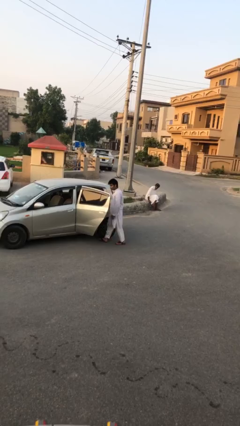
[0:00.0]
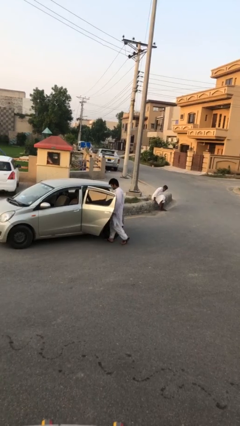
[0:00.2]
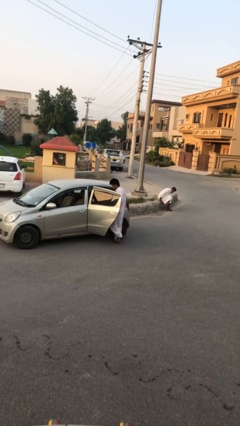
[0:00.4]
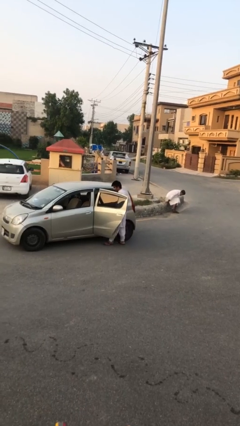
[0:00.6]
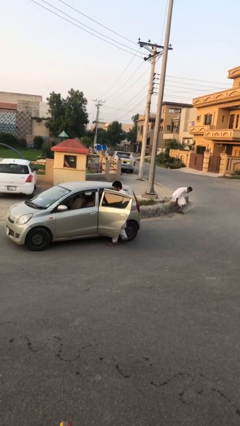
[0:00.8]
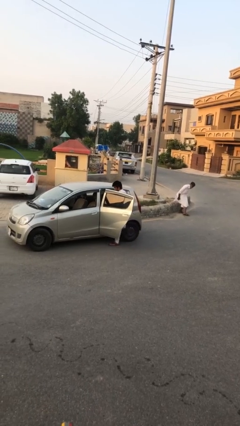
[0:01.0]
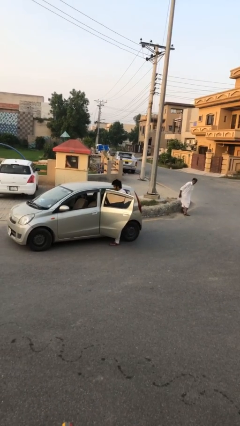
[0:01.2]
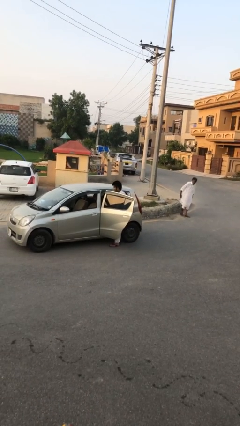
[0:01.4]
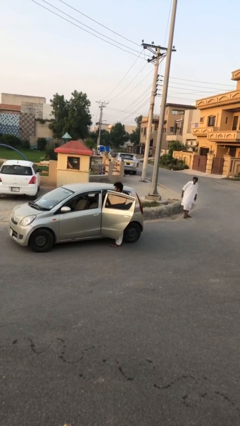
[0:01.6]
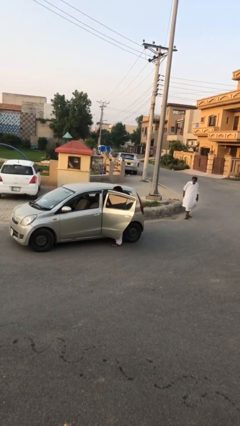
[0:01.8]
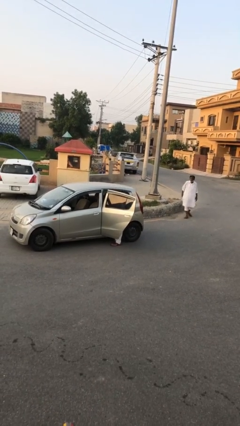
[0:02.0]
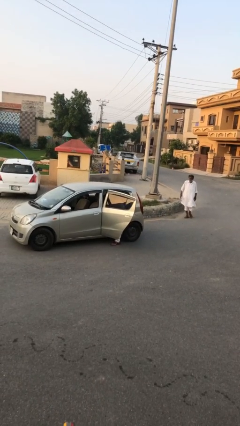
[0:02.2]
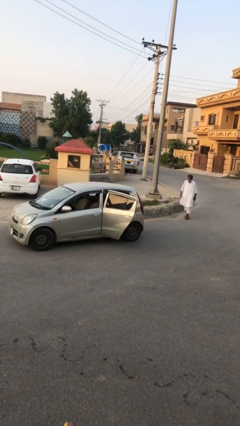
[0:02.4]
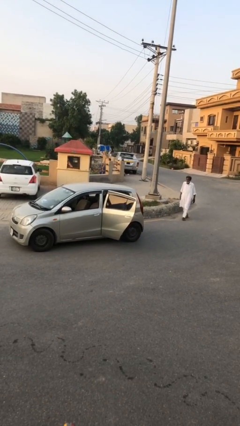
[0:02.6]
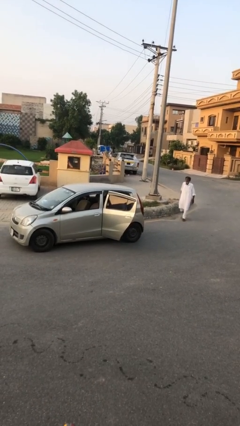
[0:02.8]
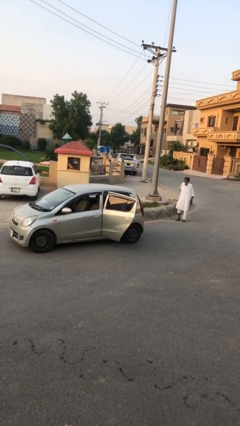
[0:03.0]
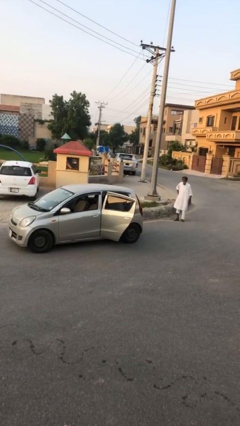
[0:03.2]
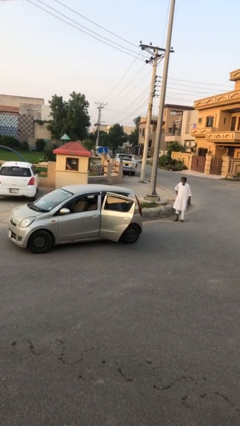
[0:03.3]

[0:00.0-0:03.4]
person enters car

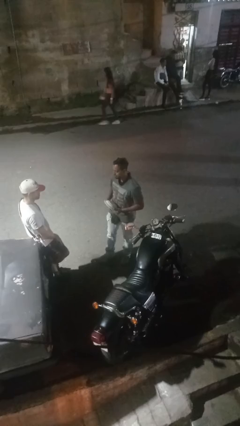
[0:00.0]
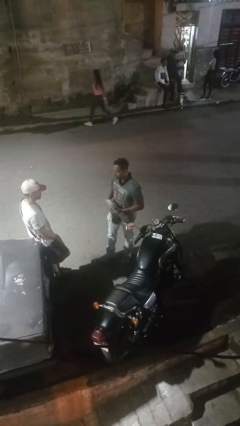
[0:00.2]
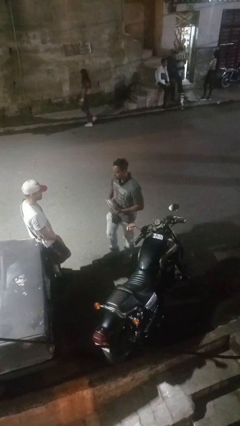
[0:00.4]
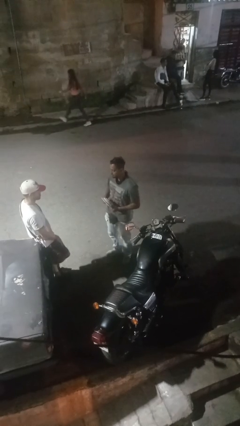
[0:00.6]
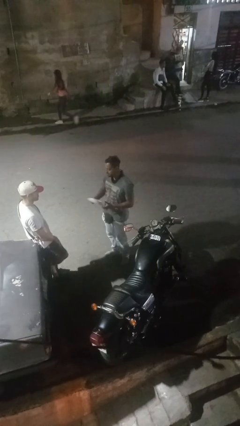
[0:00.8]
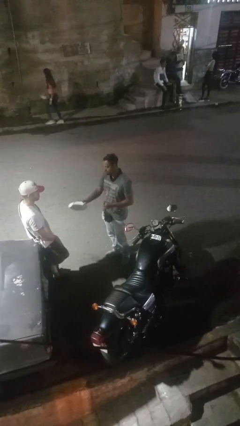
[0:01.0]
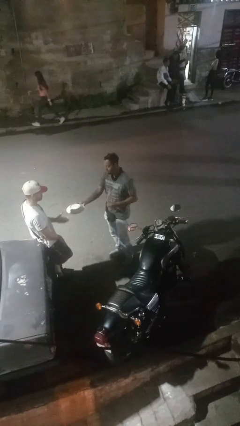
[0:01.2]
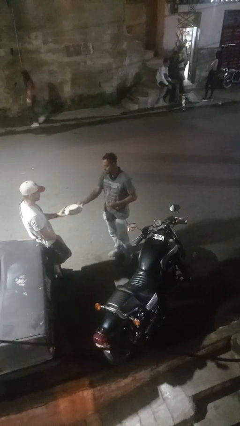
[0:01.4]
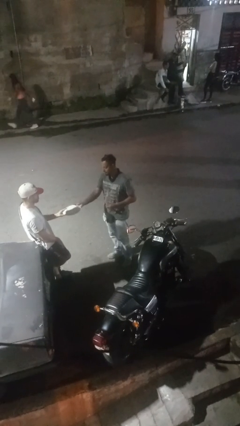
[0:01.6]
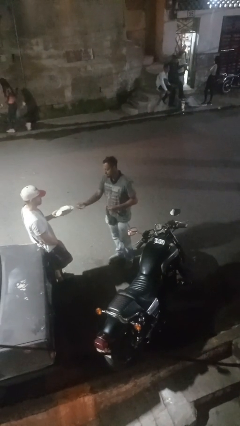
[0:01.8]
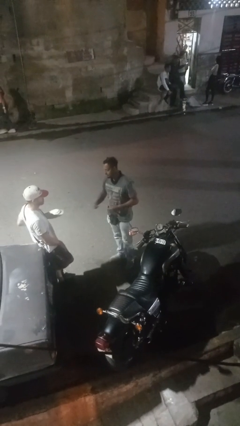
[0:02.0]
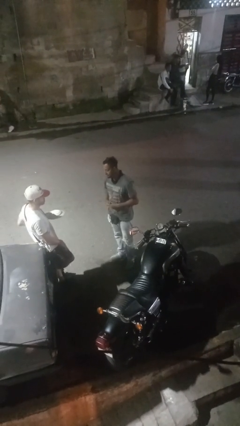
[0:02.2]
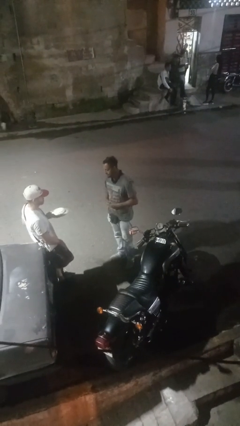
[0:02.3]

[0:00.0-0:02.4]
person transfers object to person

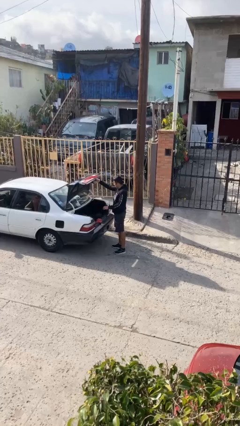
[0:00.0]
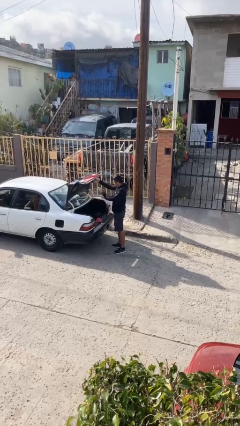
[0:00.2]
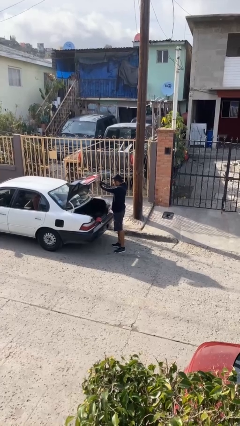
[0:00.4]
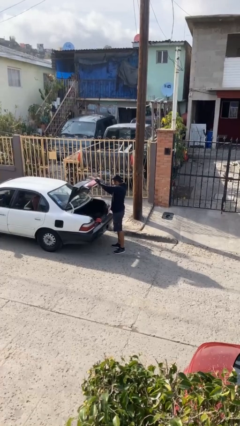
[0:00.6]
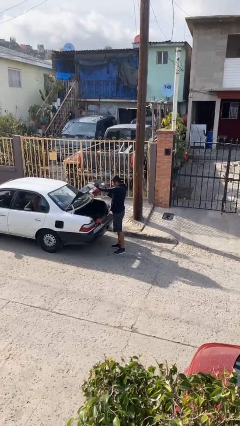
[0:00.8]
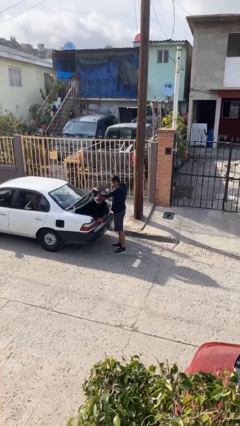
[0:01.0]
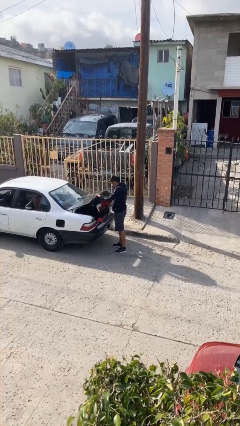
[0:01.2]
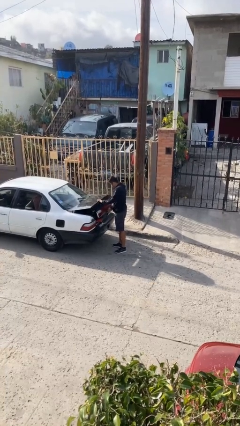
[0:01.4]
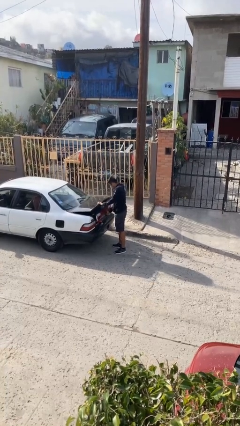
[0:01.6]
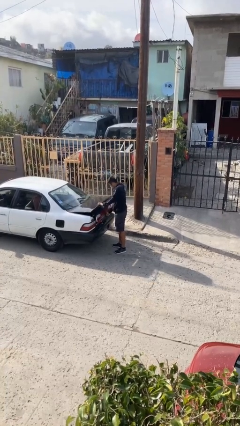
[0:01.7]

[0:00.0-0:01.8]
person closes car trunk

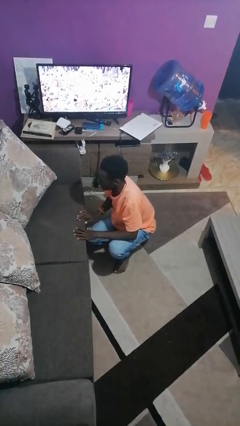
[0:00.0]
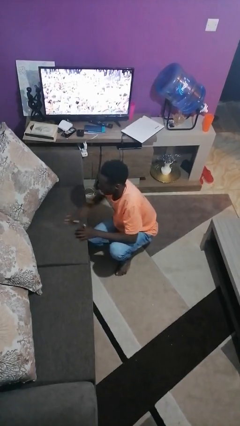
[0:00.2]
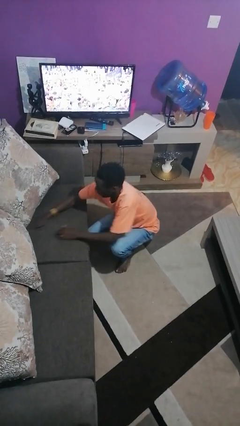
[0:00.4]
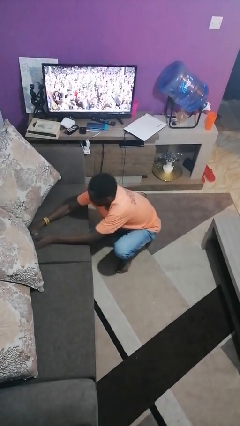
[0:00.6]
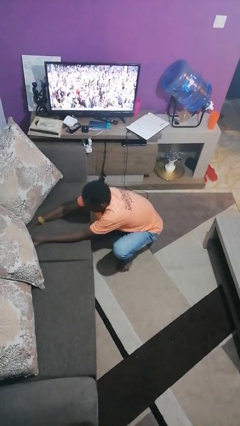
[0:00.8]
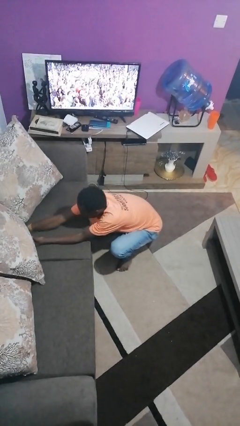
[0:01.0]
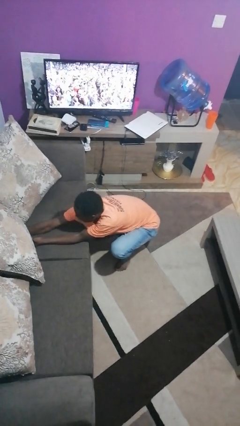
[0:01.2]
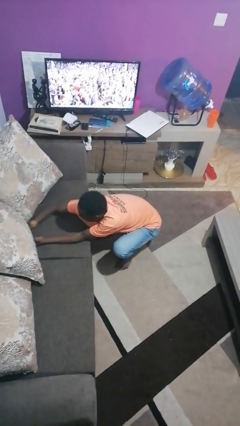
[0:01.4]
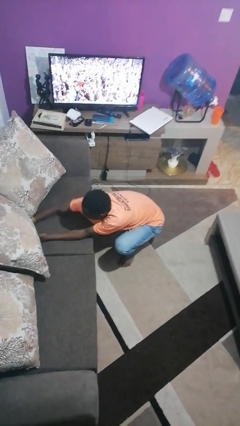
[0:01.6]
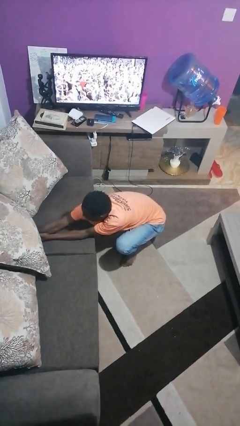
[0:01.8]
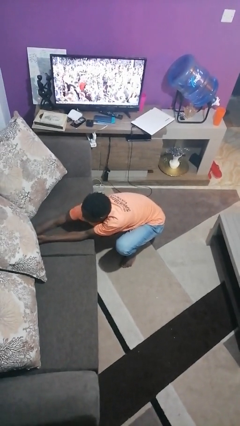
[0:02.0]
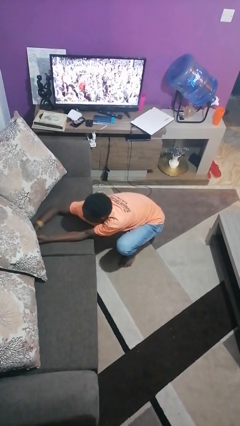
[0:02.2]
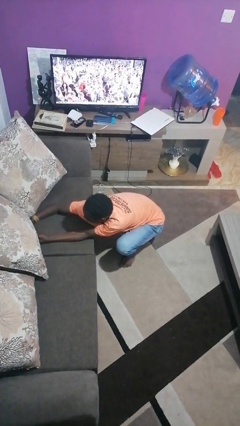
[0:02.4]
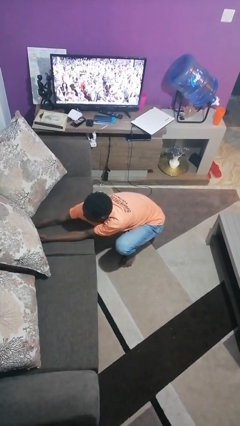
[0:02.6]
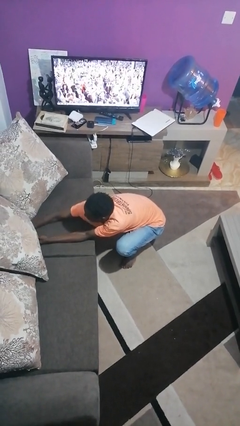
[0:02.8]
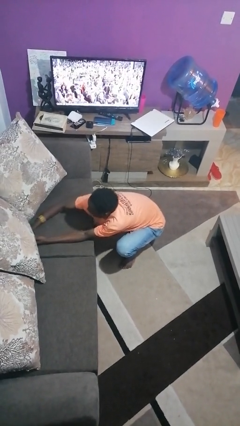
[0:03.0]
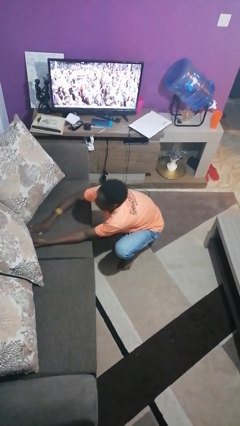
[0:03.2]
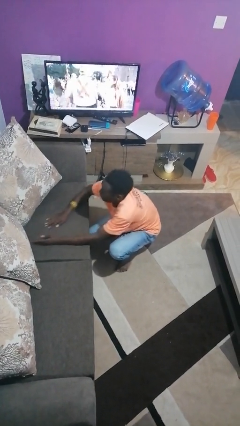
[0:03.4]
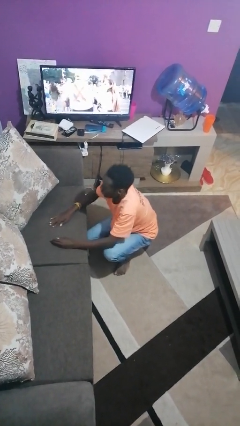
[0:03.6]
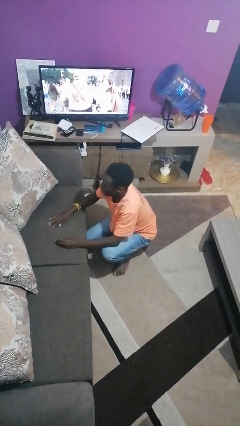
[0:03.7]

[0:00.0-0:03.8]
person searches in couch

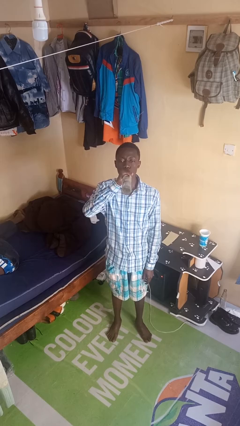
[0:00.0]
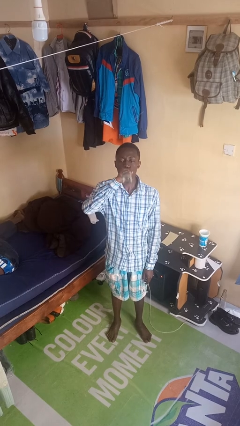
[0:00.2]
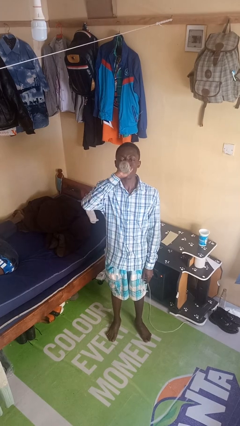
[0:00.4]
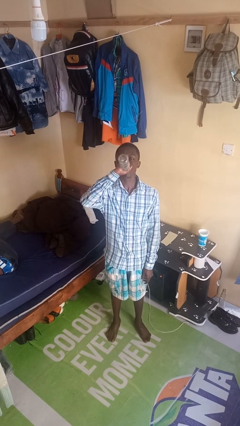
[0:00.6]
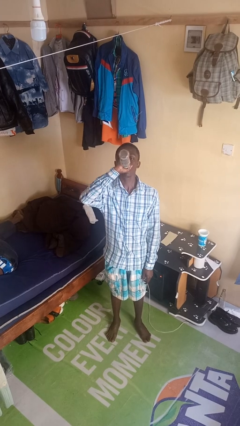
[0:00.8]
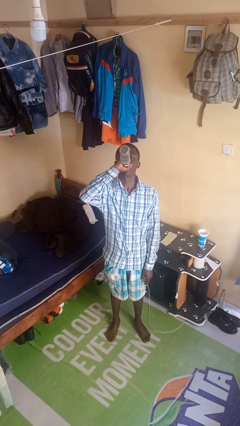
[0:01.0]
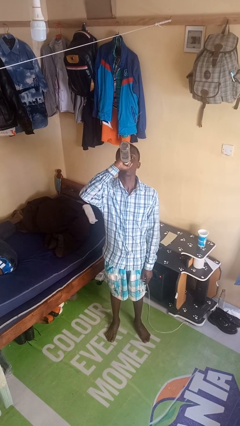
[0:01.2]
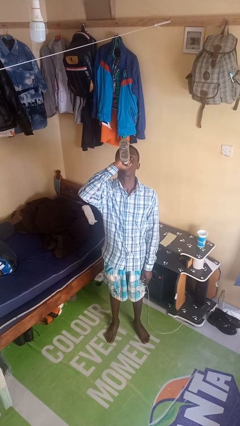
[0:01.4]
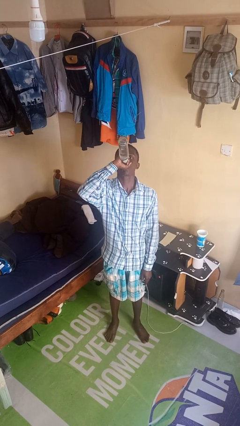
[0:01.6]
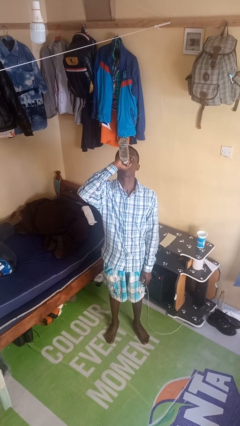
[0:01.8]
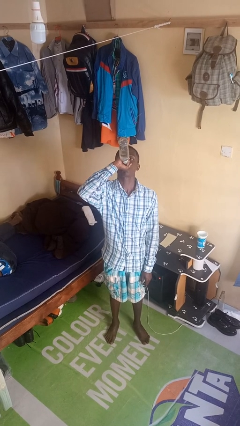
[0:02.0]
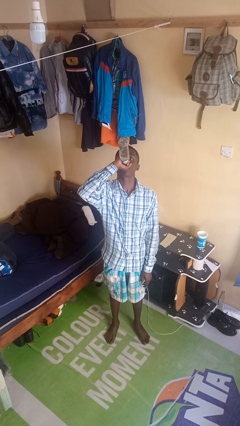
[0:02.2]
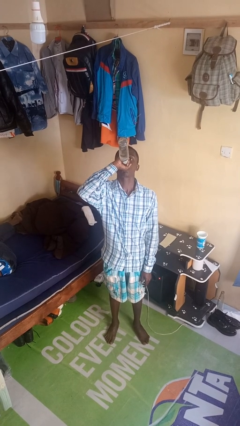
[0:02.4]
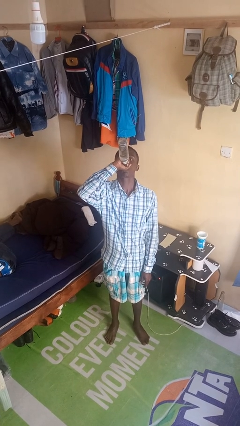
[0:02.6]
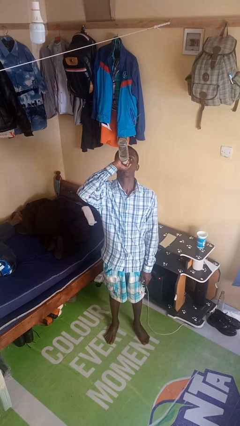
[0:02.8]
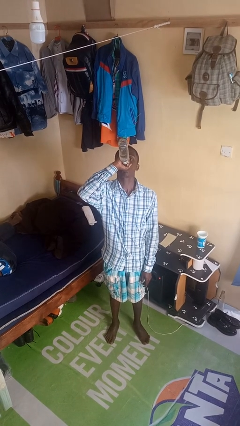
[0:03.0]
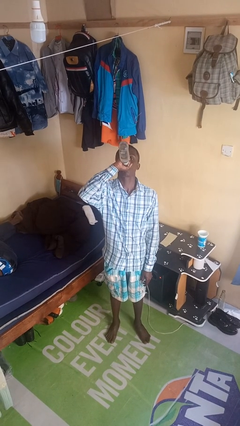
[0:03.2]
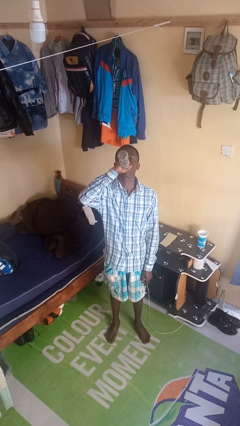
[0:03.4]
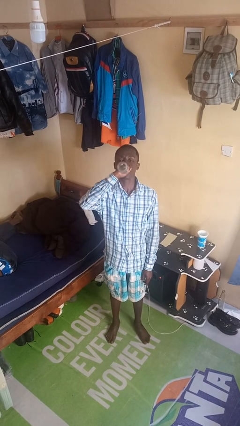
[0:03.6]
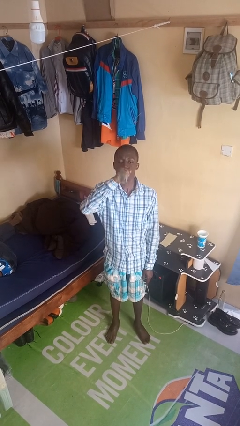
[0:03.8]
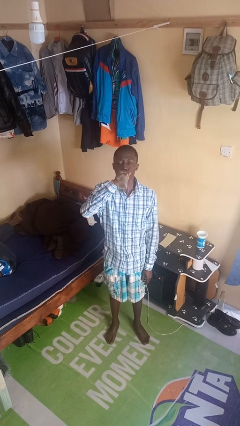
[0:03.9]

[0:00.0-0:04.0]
person drinks from bottle

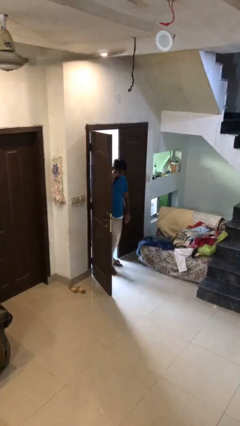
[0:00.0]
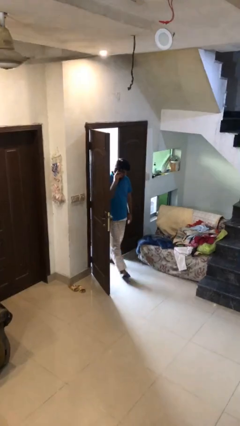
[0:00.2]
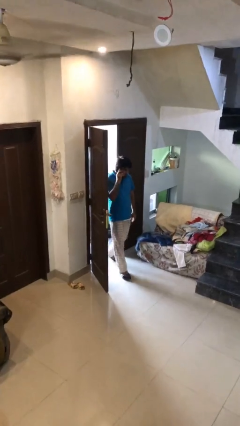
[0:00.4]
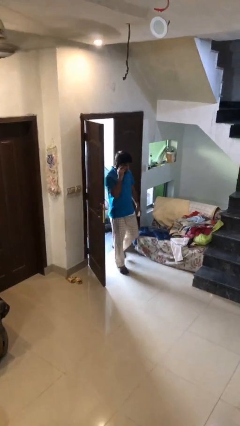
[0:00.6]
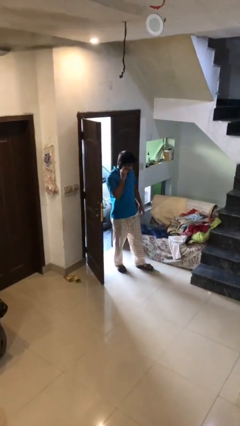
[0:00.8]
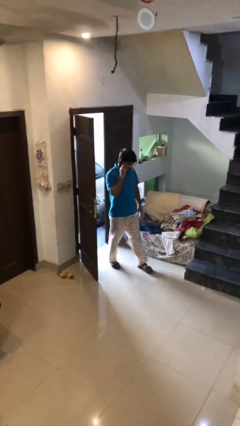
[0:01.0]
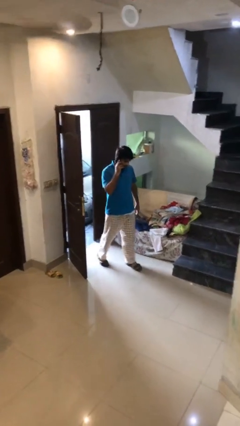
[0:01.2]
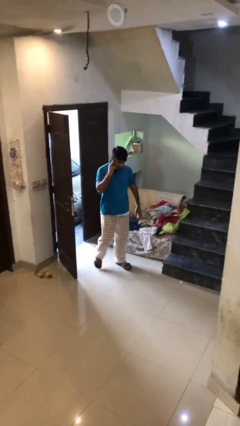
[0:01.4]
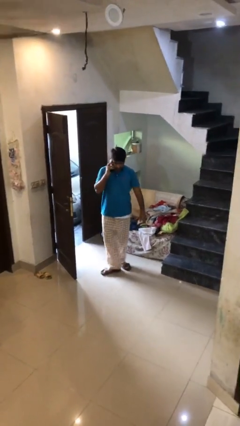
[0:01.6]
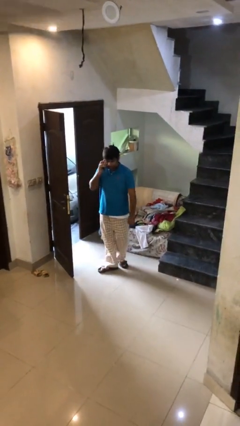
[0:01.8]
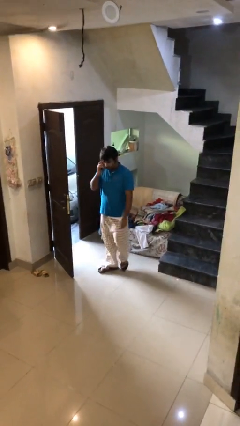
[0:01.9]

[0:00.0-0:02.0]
person enters scene through structure

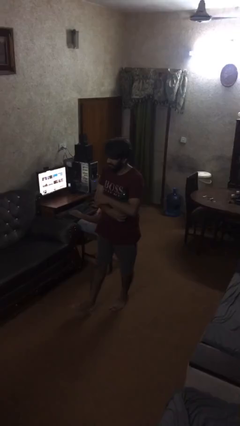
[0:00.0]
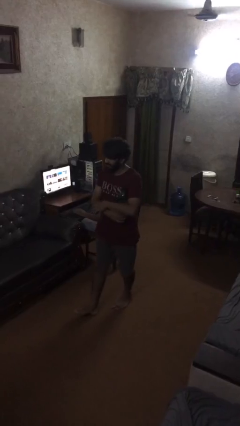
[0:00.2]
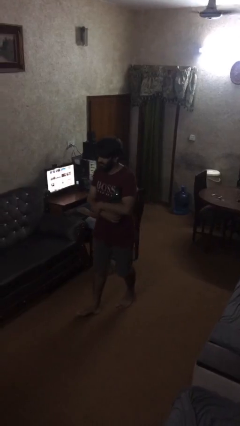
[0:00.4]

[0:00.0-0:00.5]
person steals object from person
